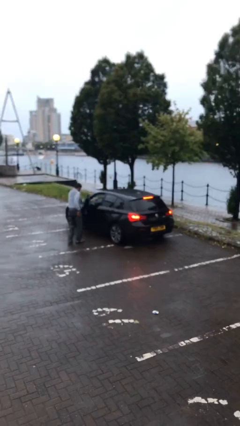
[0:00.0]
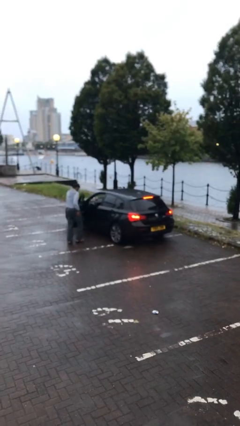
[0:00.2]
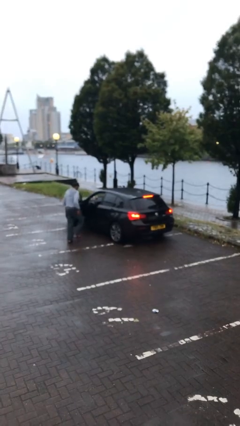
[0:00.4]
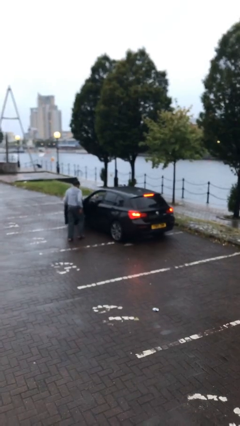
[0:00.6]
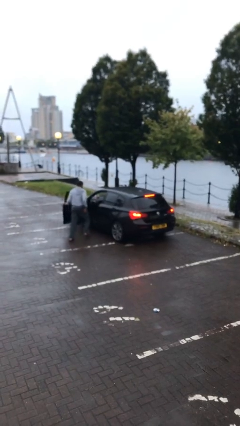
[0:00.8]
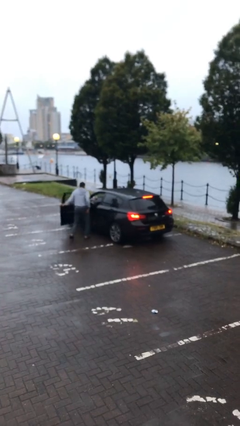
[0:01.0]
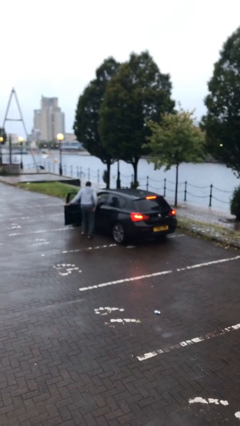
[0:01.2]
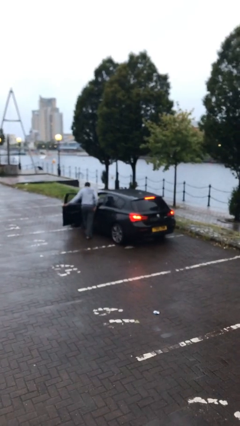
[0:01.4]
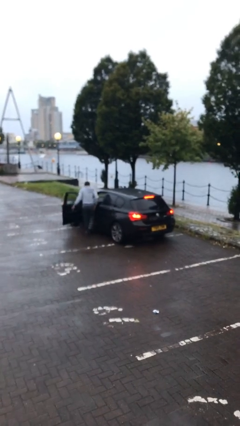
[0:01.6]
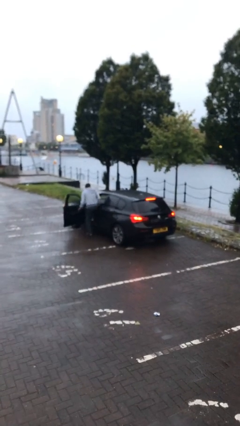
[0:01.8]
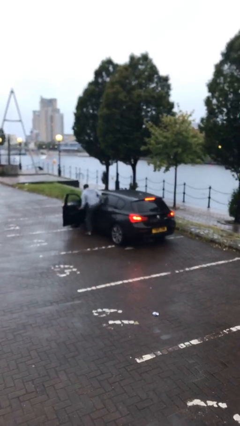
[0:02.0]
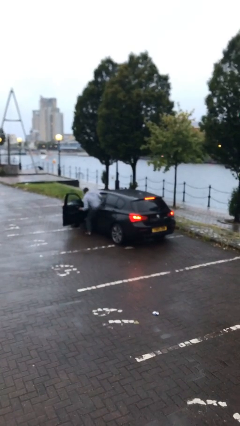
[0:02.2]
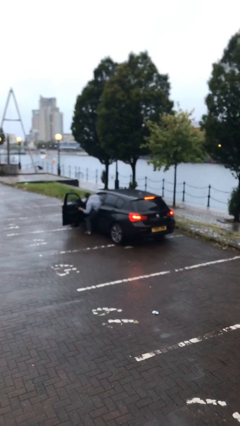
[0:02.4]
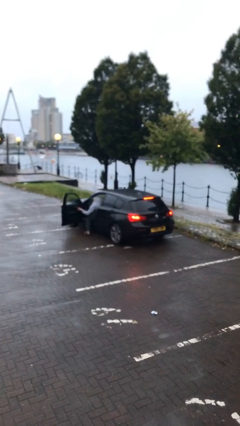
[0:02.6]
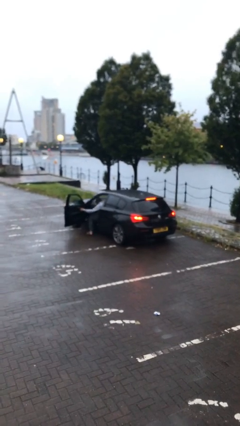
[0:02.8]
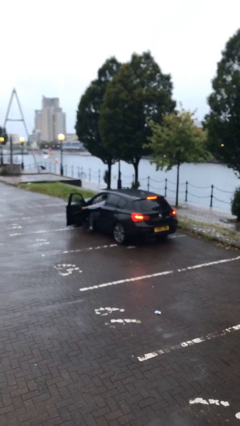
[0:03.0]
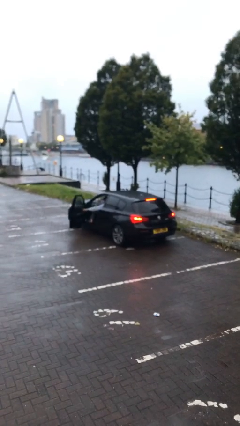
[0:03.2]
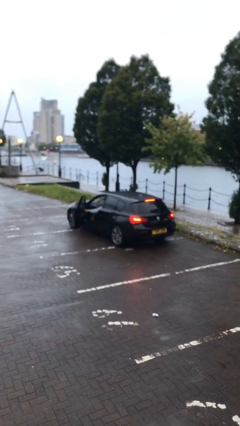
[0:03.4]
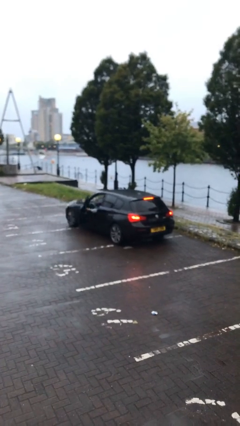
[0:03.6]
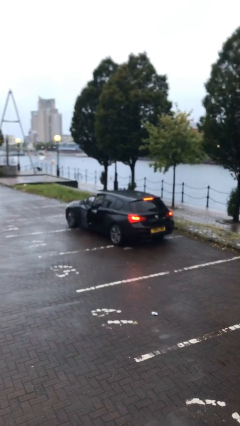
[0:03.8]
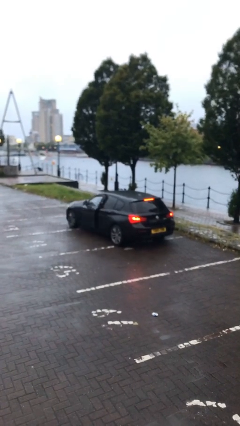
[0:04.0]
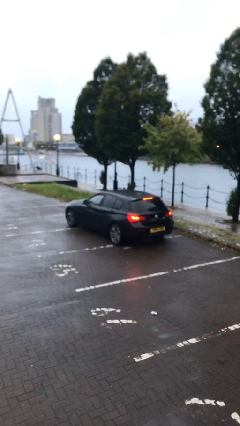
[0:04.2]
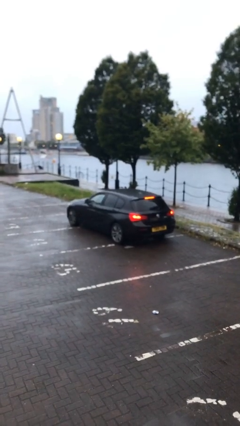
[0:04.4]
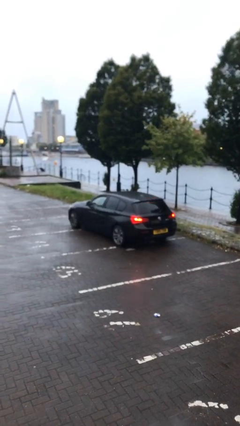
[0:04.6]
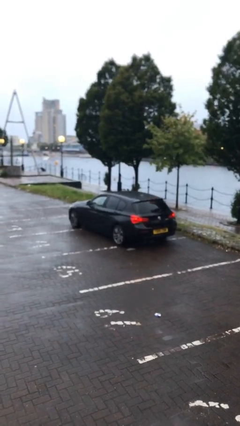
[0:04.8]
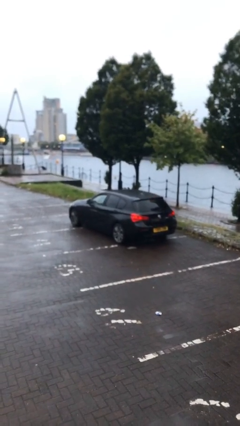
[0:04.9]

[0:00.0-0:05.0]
car picks up person

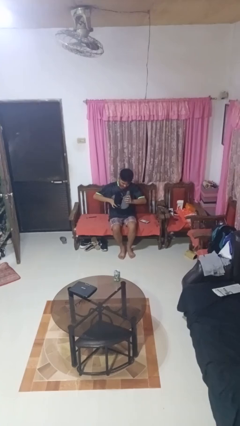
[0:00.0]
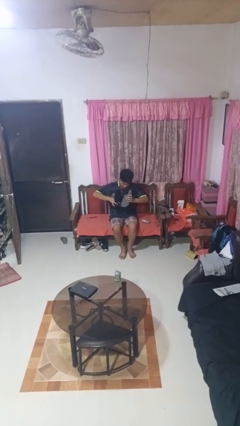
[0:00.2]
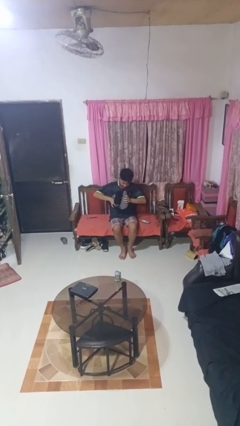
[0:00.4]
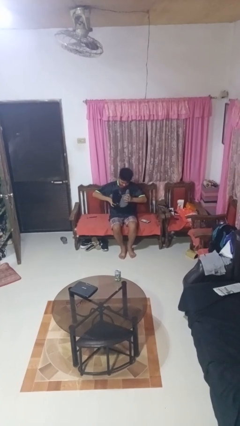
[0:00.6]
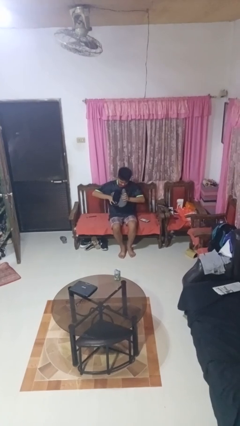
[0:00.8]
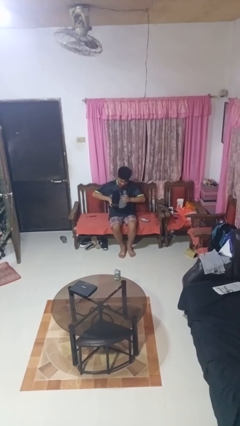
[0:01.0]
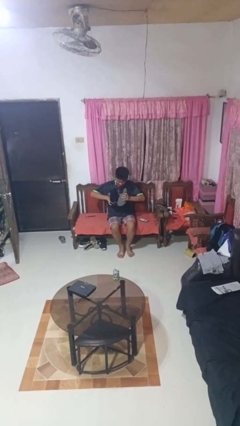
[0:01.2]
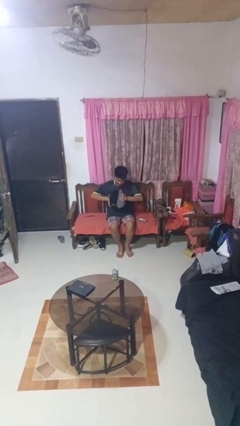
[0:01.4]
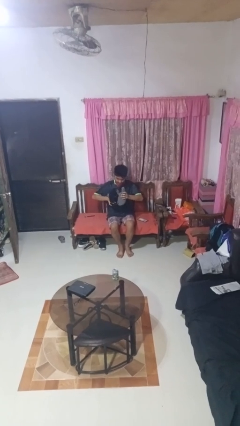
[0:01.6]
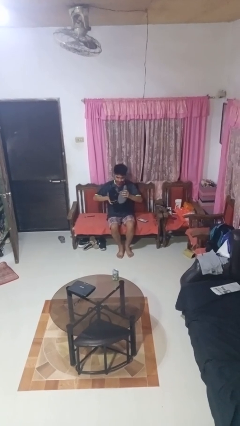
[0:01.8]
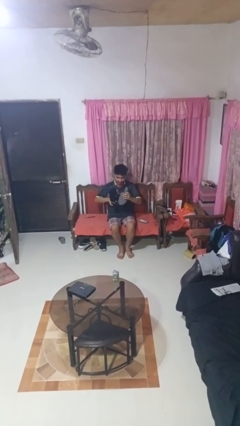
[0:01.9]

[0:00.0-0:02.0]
person squeezes object

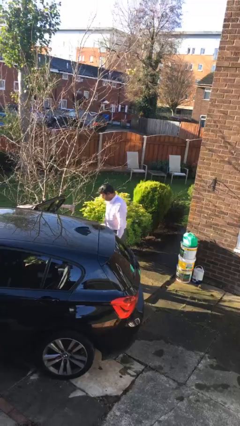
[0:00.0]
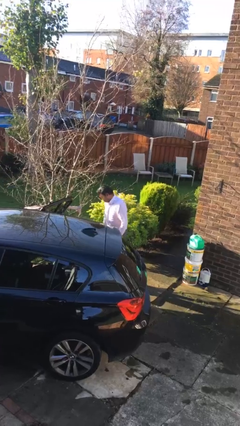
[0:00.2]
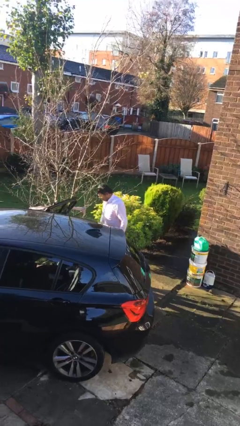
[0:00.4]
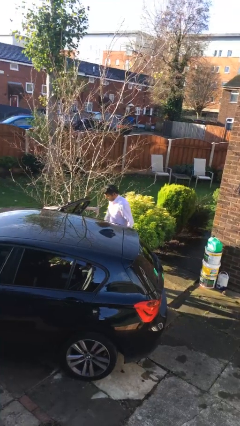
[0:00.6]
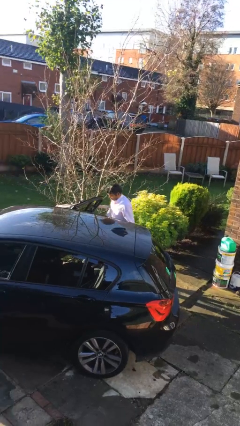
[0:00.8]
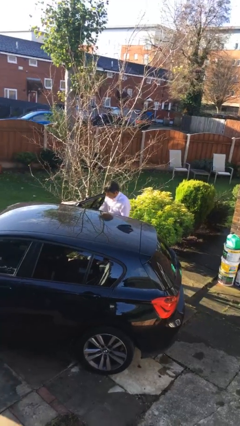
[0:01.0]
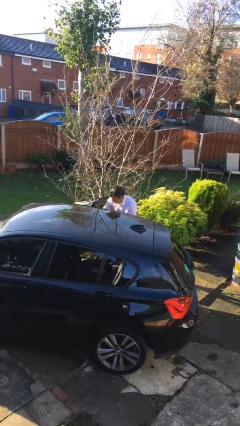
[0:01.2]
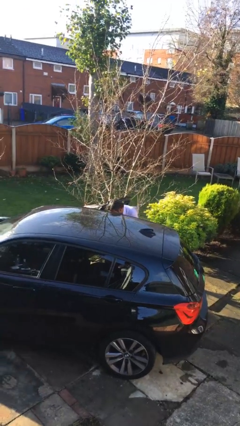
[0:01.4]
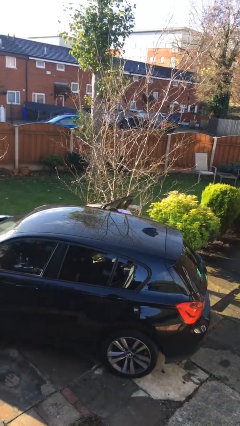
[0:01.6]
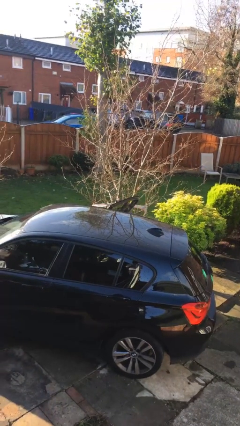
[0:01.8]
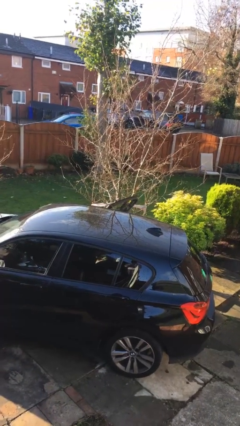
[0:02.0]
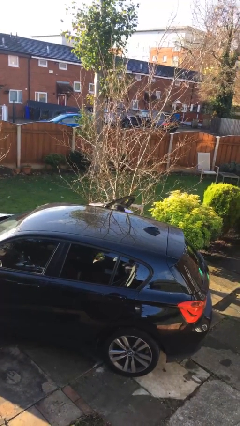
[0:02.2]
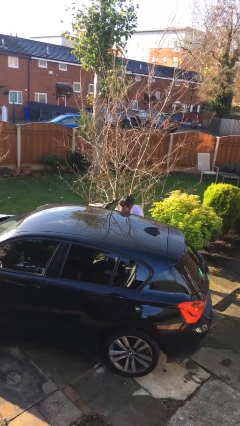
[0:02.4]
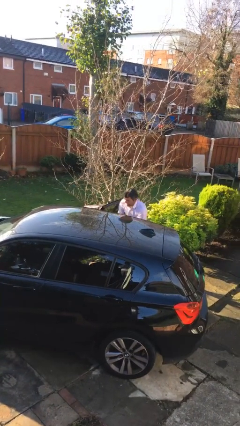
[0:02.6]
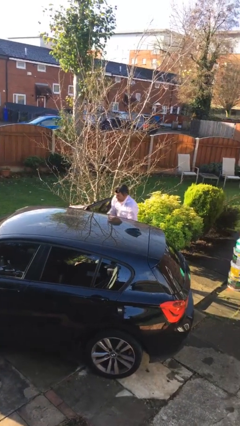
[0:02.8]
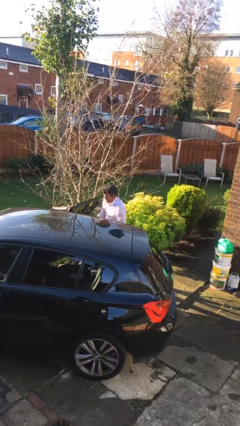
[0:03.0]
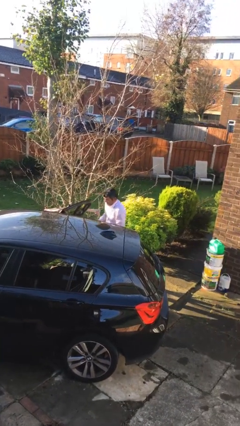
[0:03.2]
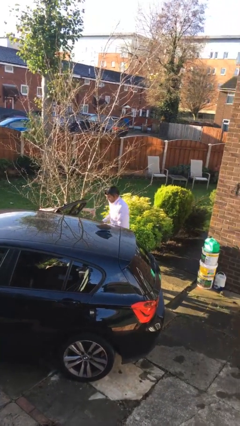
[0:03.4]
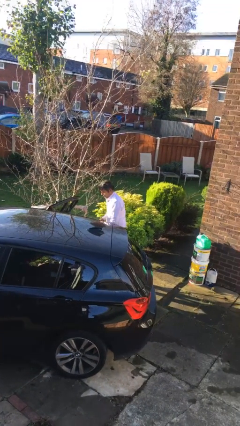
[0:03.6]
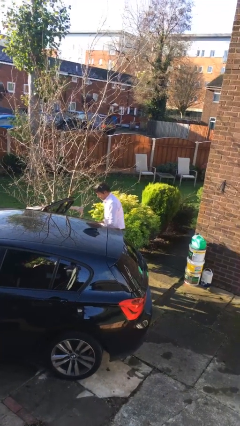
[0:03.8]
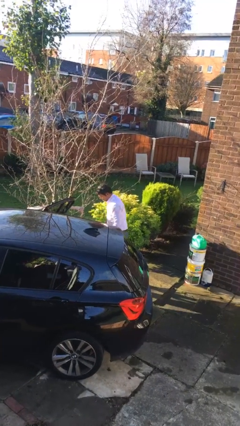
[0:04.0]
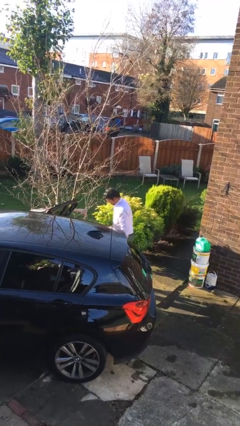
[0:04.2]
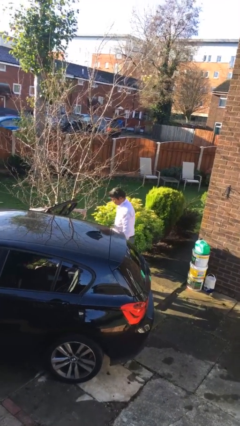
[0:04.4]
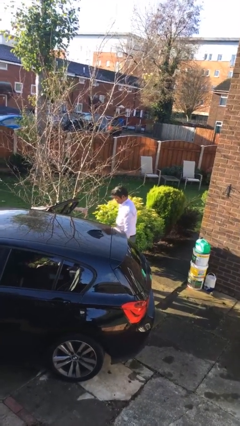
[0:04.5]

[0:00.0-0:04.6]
person unloads car

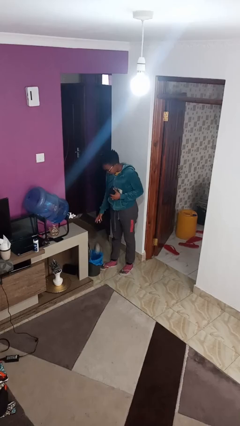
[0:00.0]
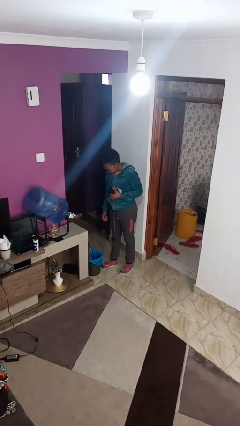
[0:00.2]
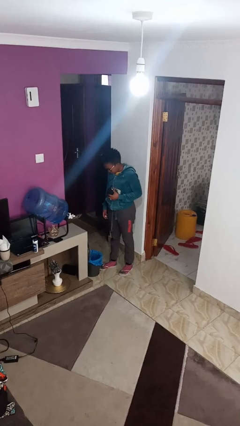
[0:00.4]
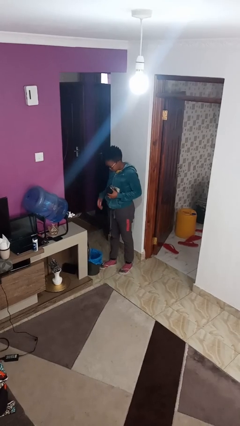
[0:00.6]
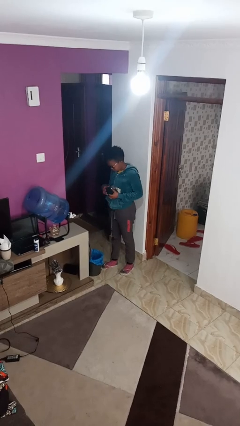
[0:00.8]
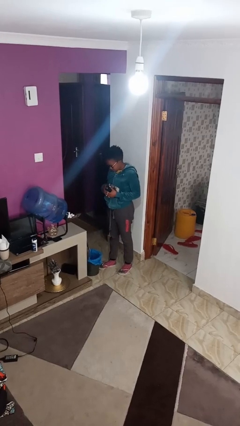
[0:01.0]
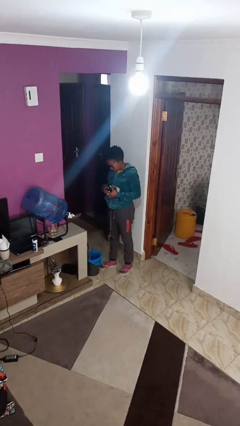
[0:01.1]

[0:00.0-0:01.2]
person discards trash

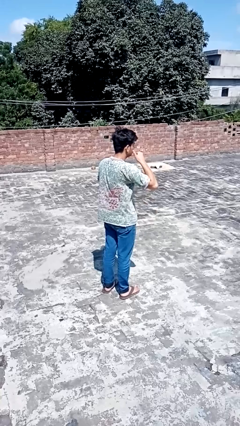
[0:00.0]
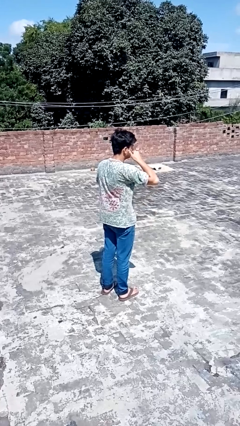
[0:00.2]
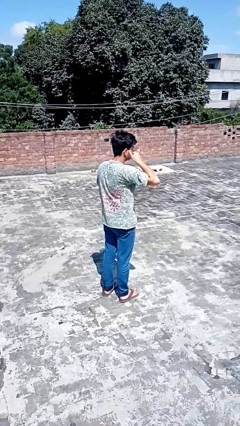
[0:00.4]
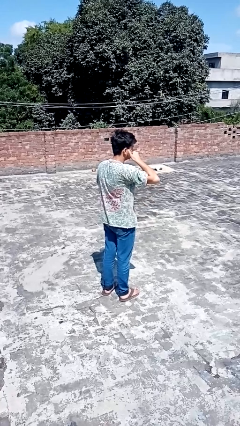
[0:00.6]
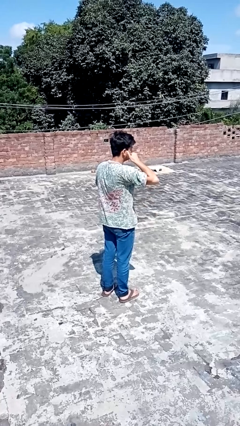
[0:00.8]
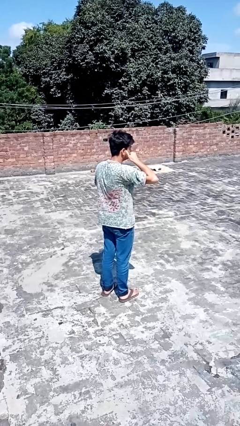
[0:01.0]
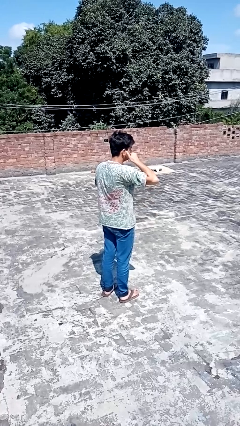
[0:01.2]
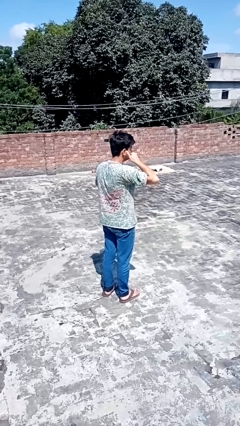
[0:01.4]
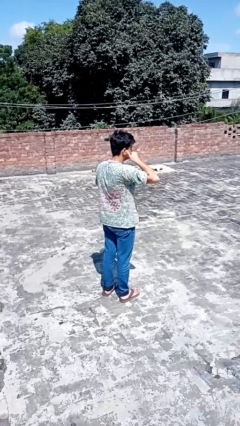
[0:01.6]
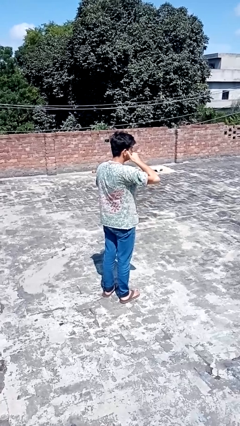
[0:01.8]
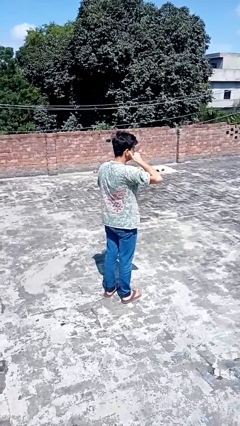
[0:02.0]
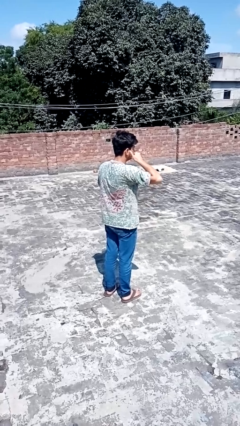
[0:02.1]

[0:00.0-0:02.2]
person gestures call me

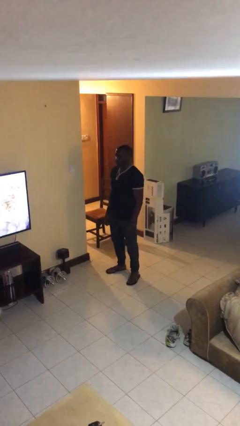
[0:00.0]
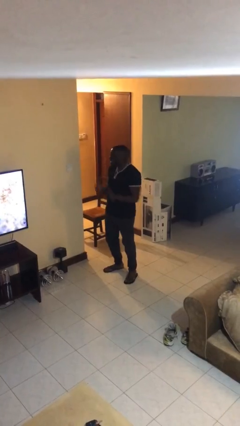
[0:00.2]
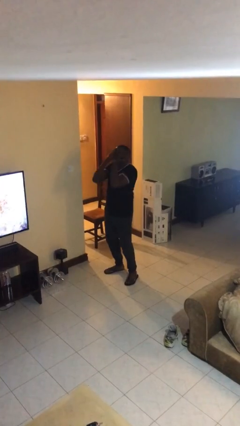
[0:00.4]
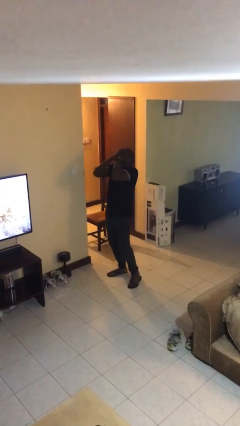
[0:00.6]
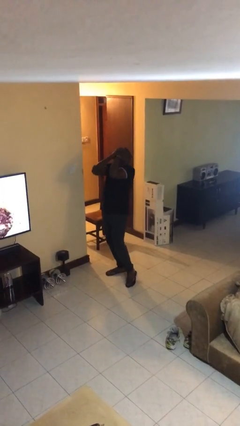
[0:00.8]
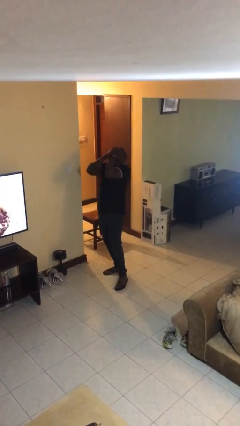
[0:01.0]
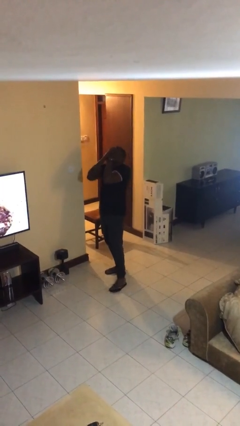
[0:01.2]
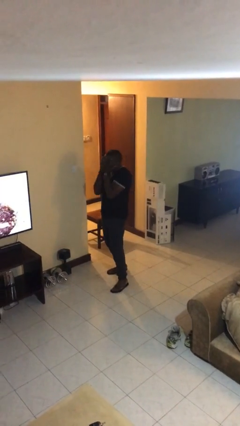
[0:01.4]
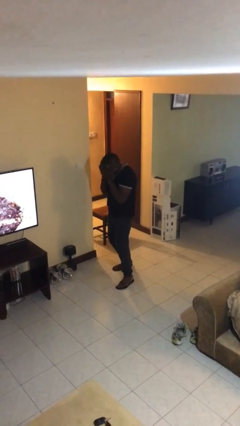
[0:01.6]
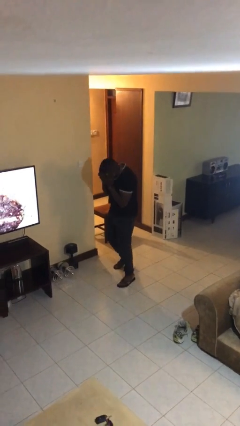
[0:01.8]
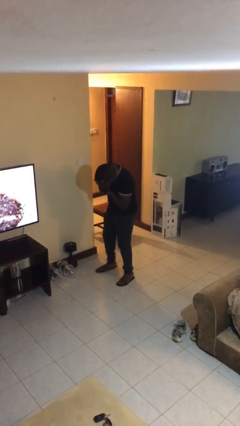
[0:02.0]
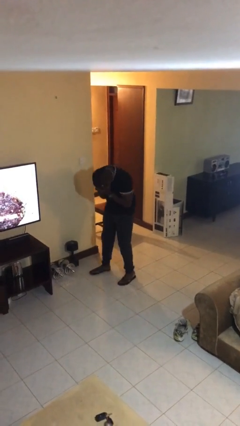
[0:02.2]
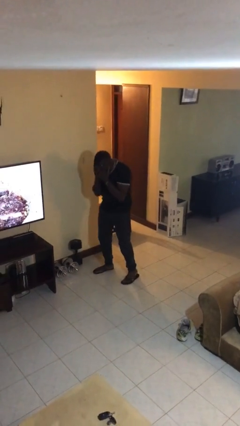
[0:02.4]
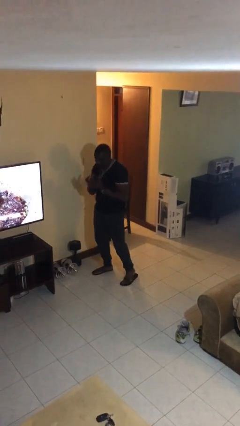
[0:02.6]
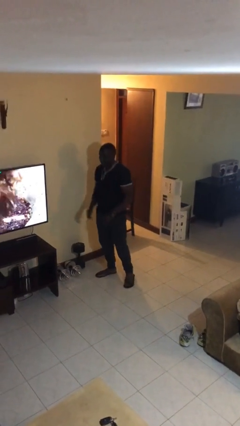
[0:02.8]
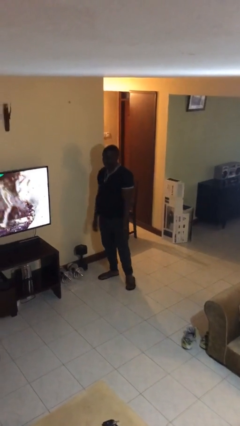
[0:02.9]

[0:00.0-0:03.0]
person covers face with hands
